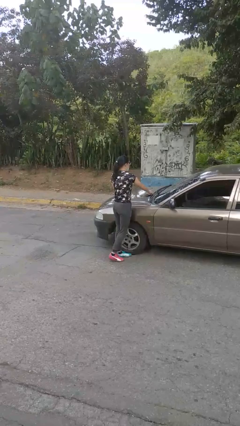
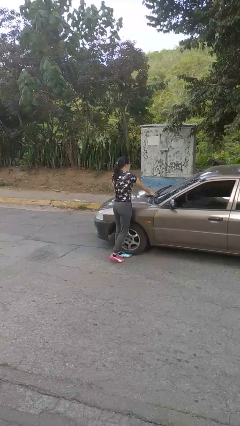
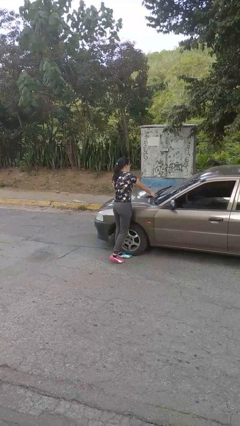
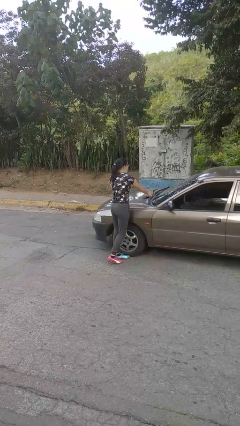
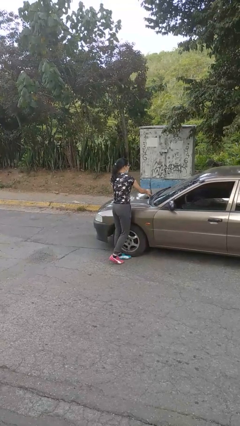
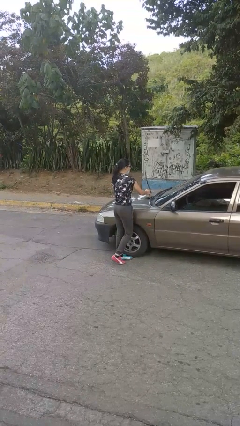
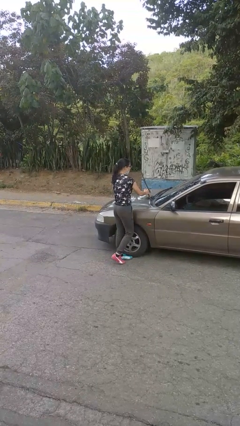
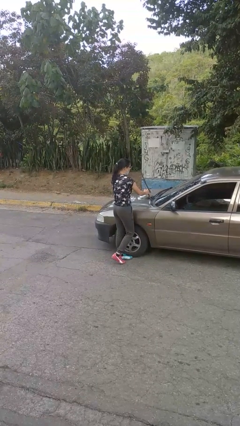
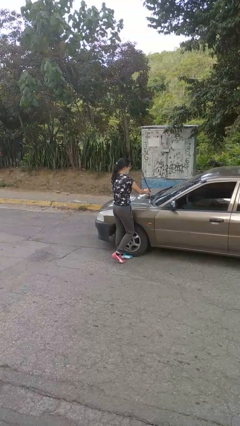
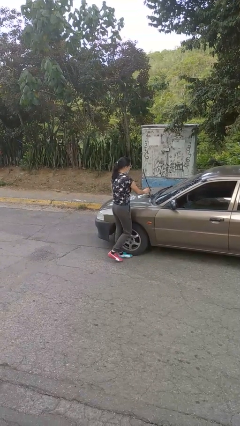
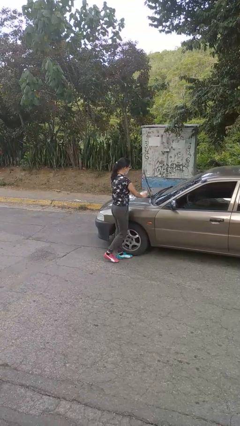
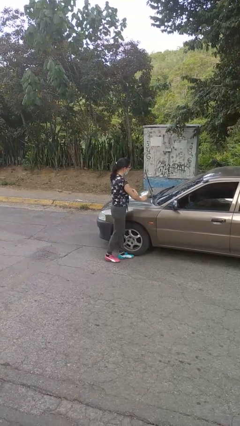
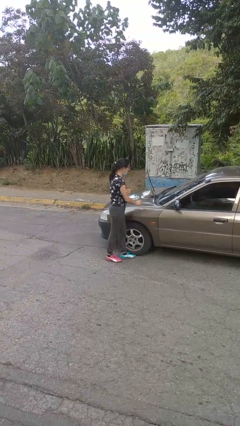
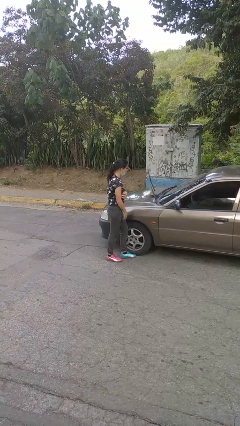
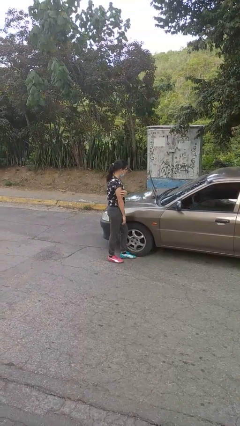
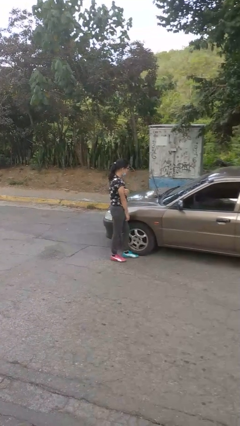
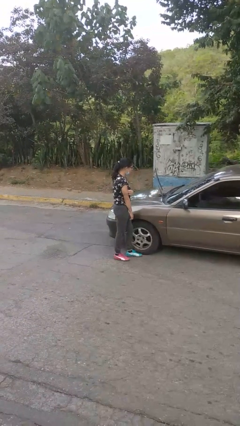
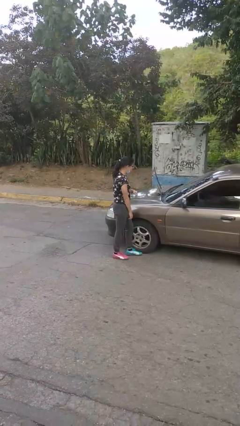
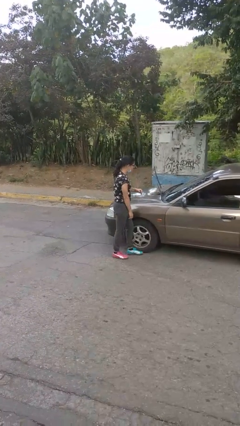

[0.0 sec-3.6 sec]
person flips up car wipers

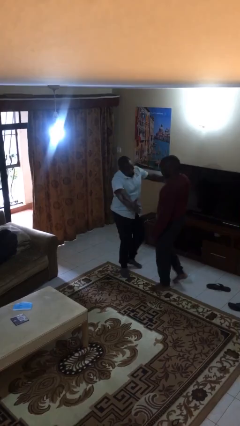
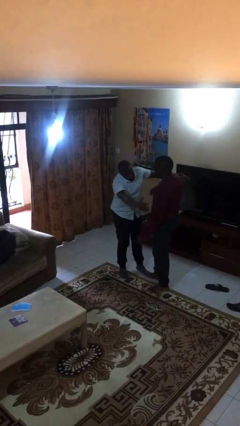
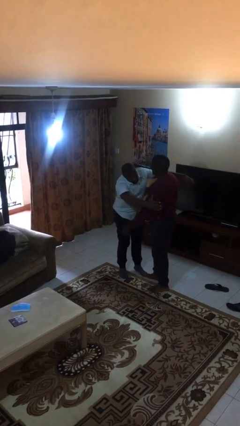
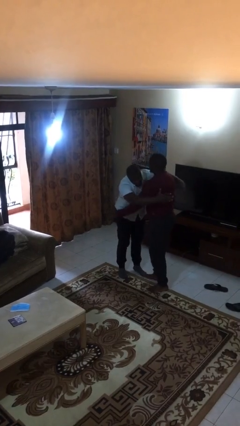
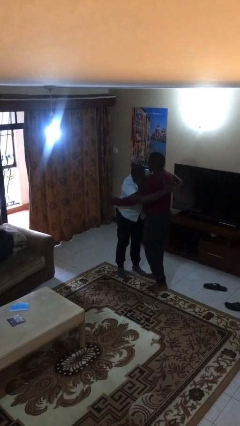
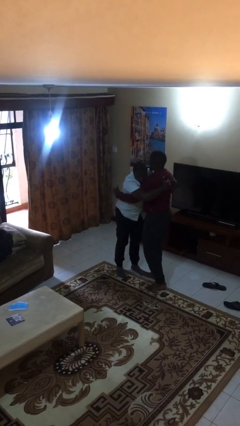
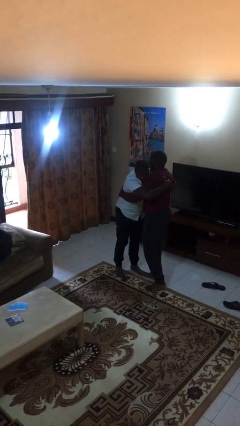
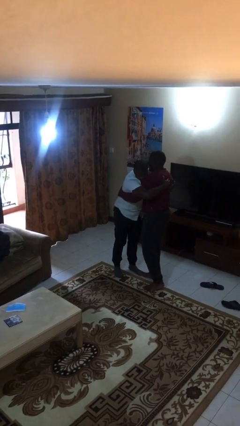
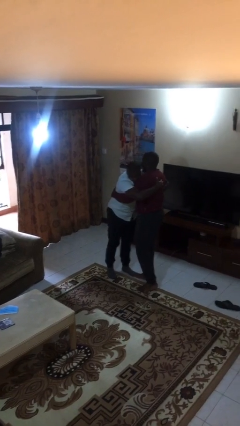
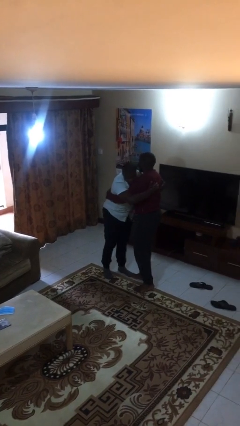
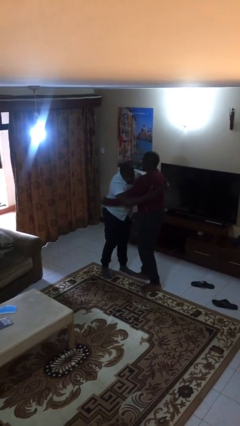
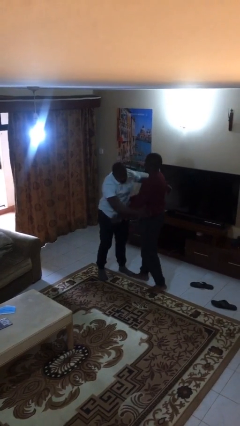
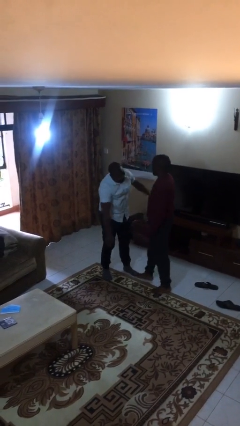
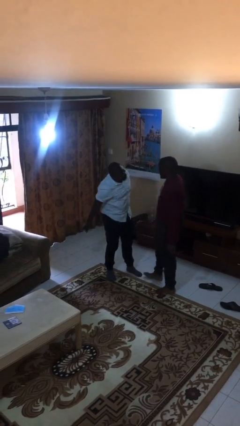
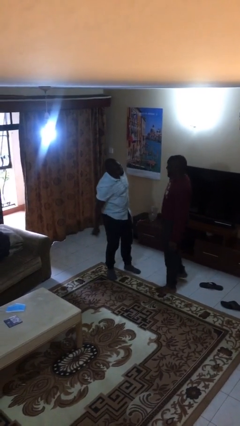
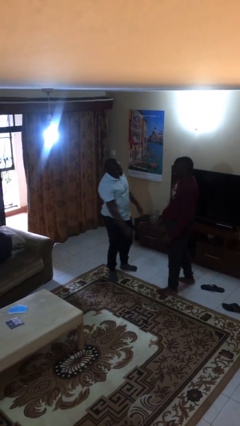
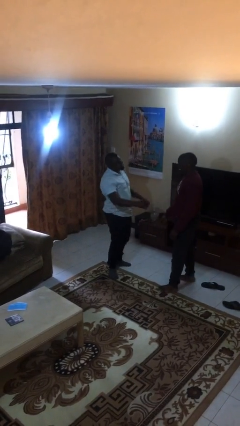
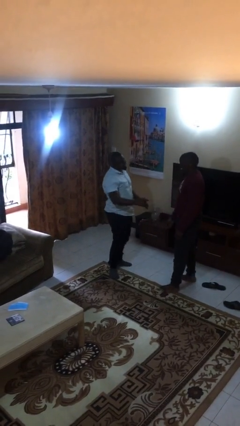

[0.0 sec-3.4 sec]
person embraces person

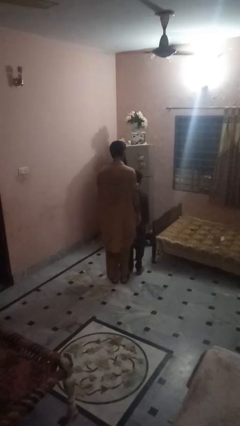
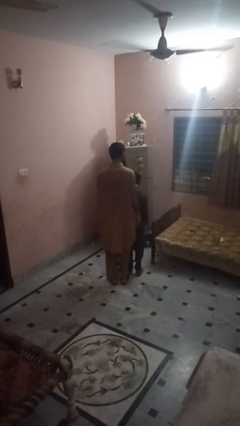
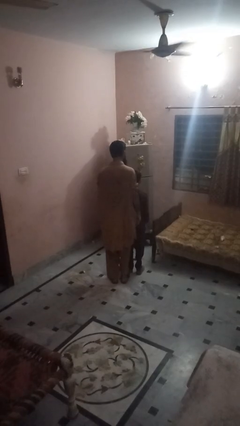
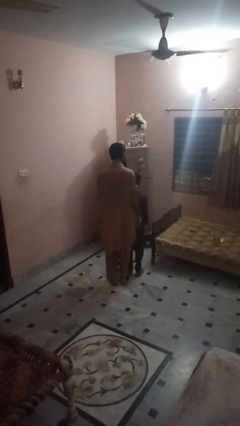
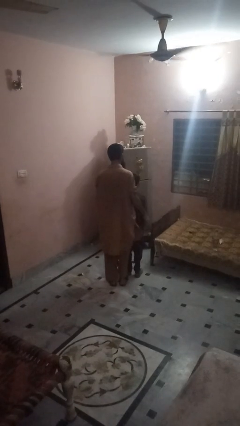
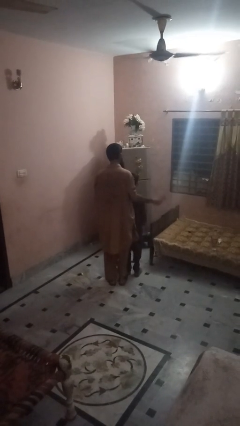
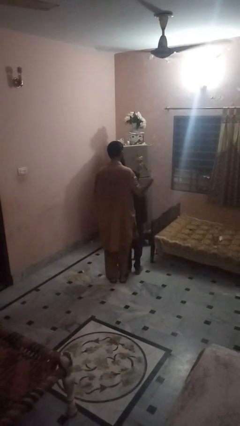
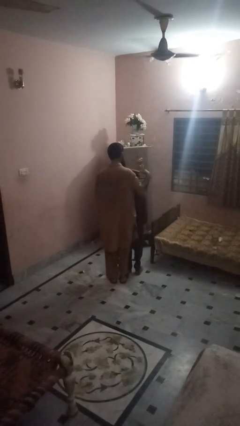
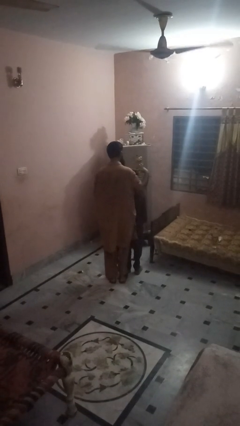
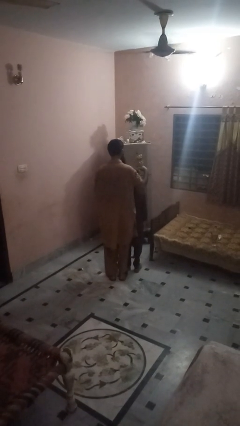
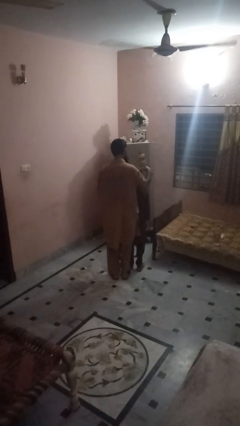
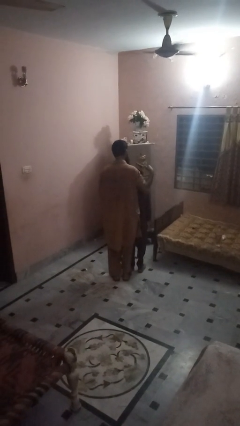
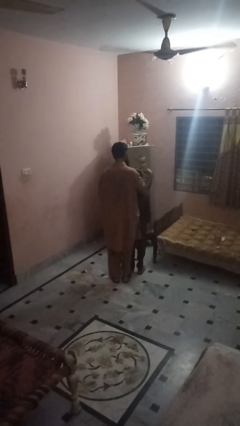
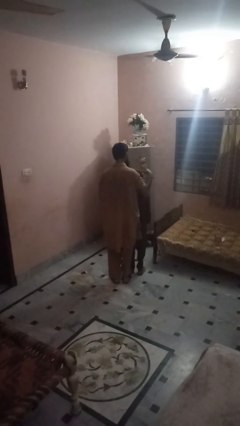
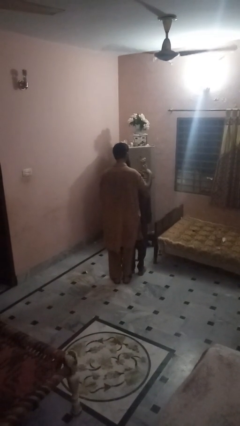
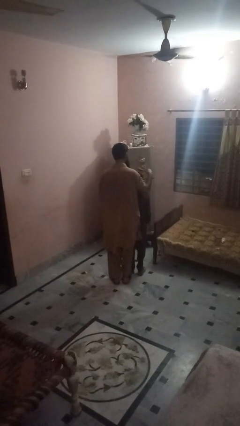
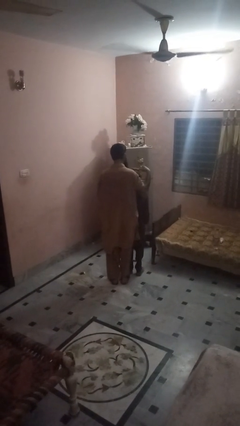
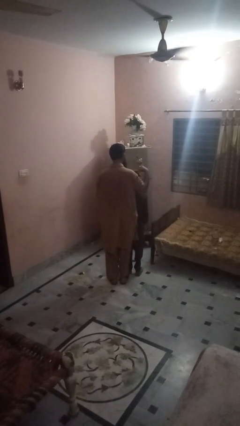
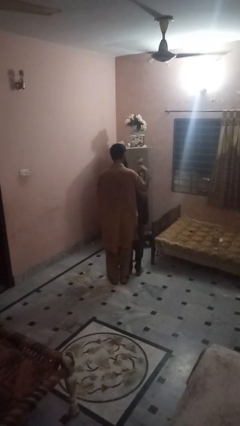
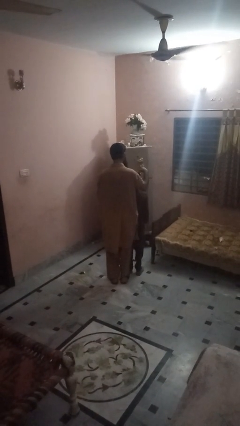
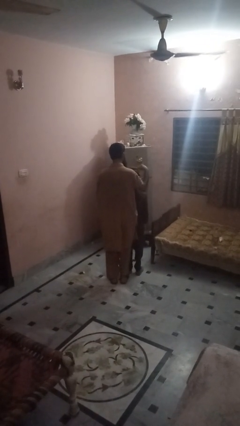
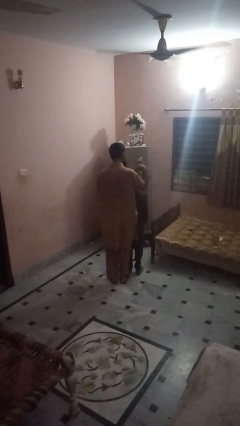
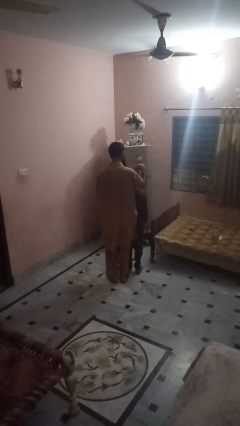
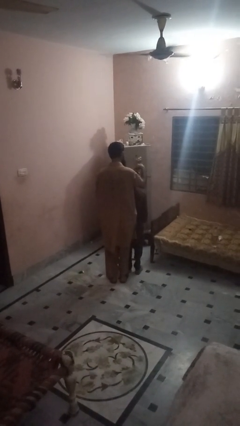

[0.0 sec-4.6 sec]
person brushes hair of person

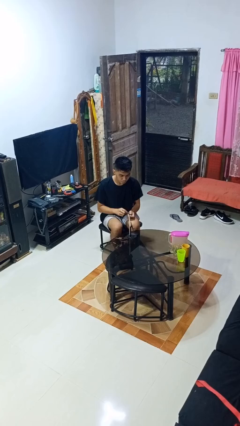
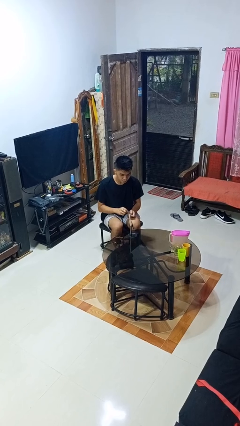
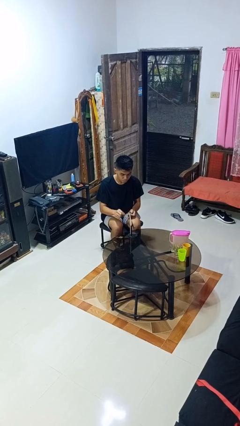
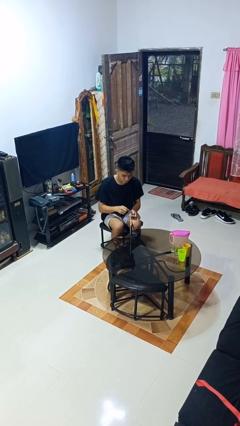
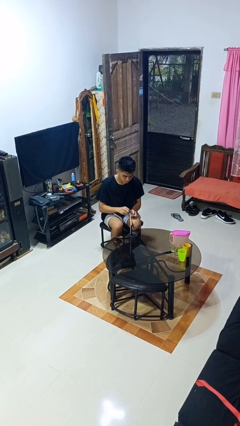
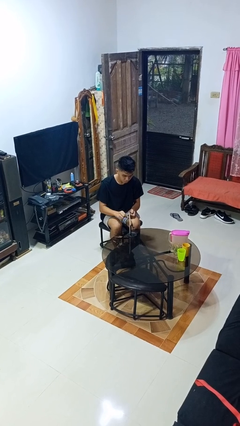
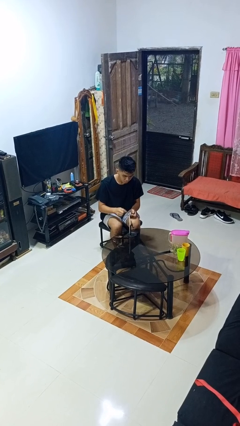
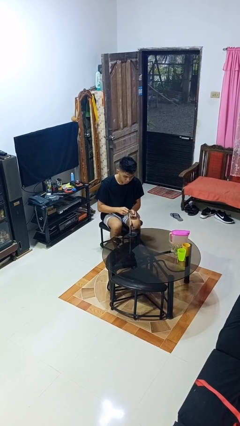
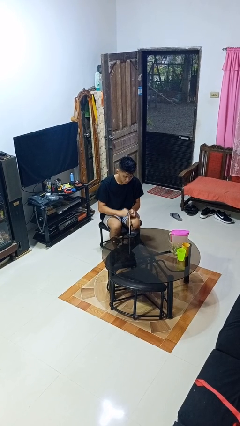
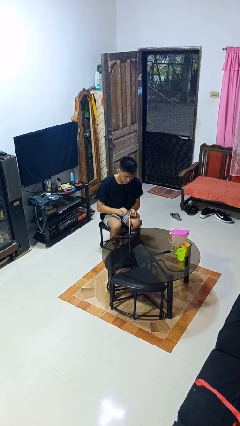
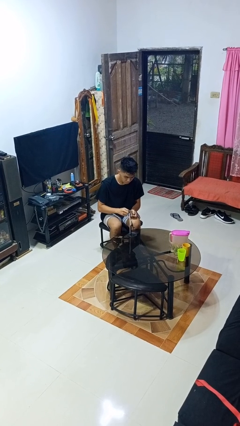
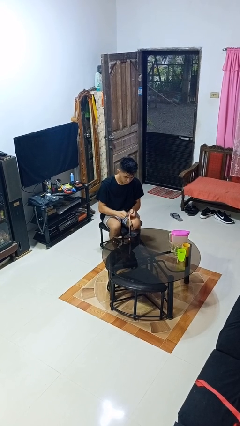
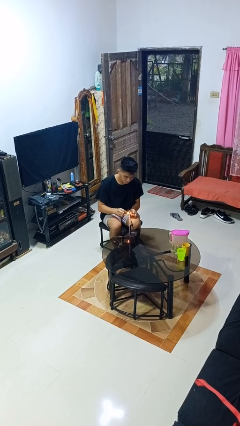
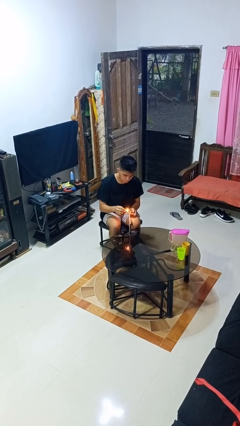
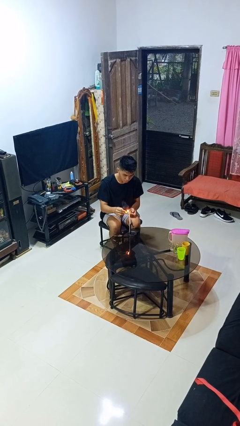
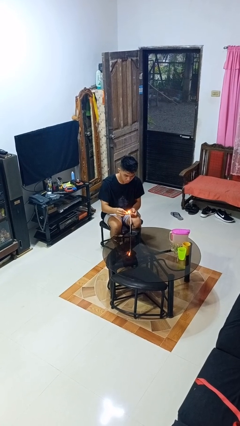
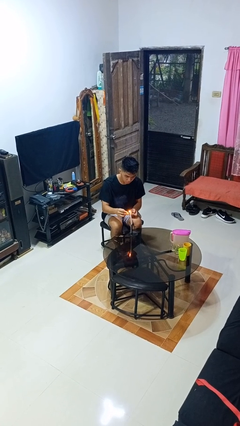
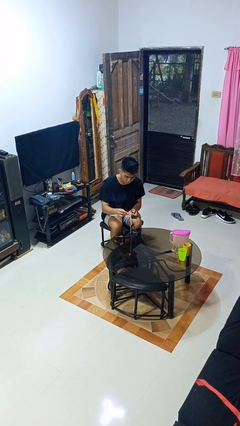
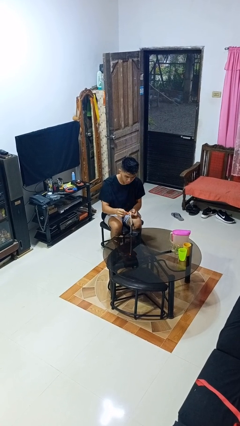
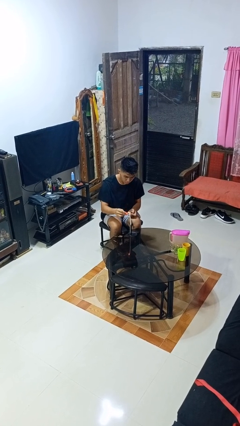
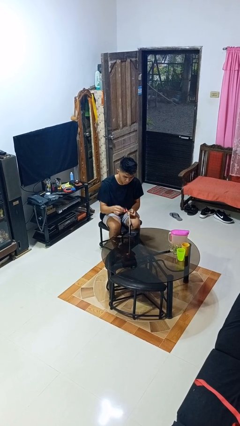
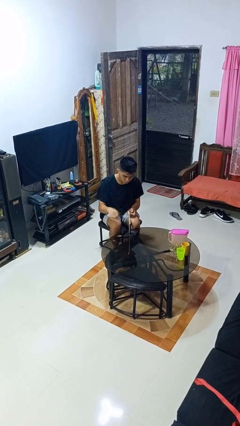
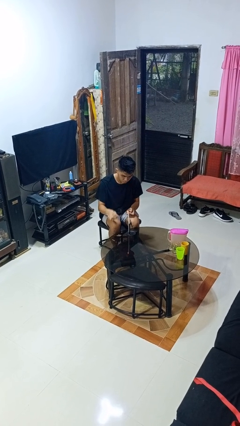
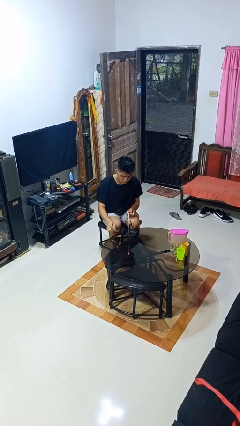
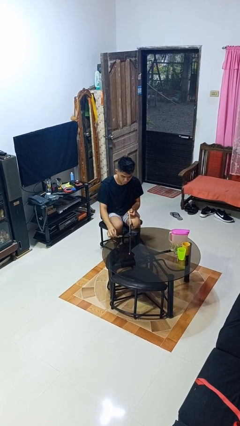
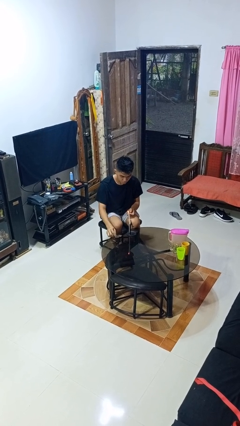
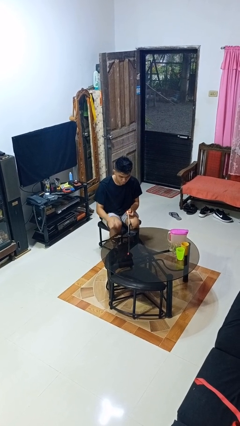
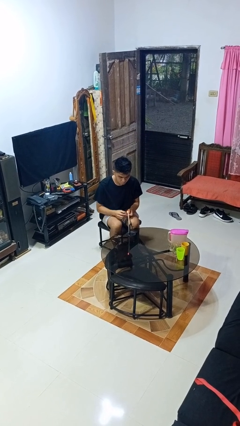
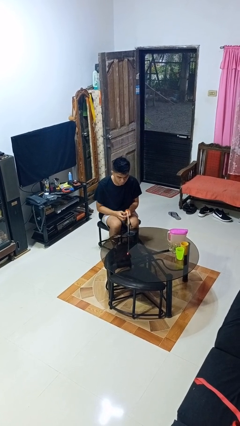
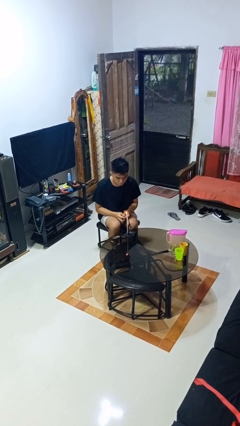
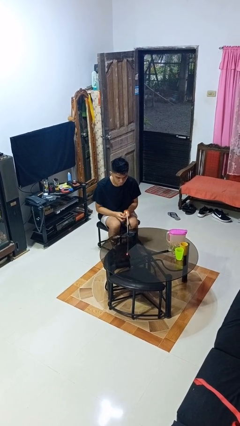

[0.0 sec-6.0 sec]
person lights candle

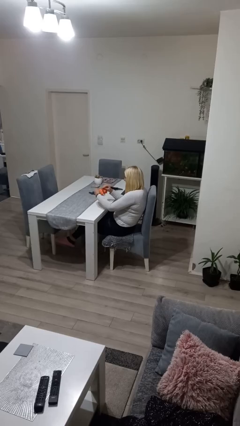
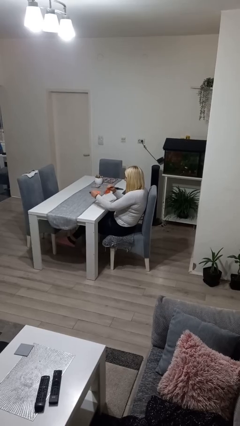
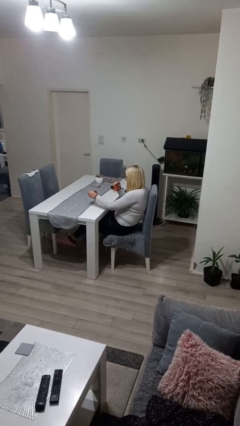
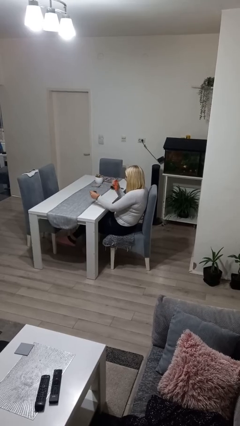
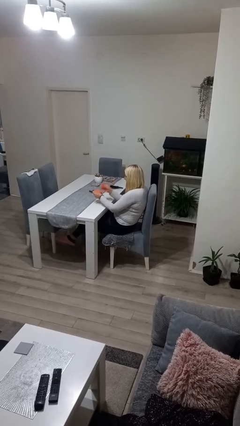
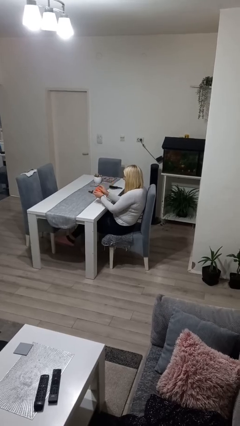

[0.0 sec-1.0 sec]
person tears paper
